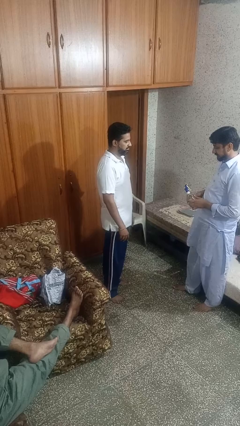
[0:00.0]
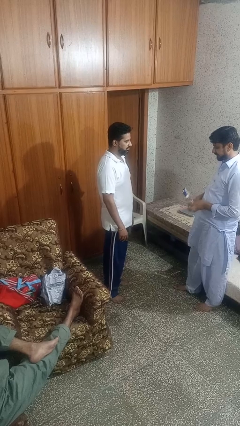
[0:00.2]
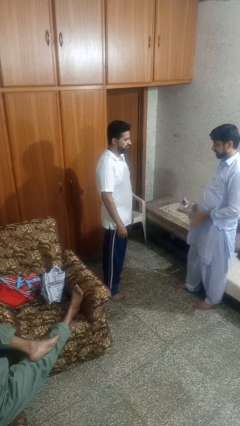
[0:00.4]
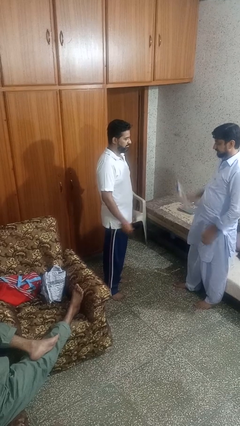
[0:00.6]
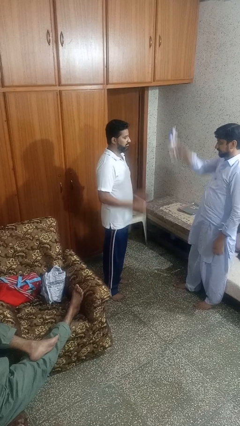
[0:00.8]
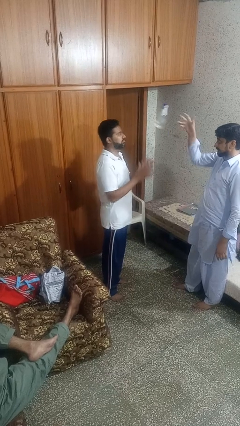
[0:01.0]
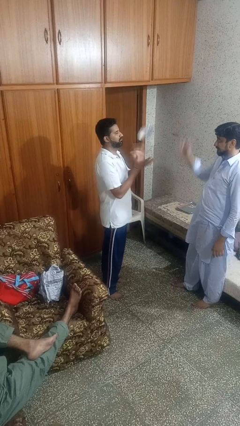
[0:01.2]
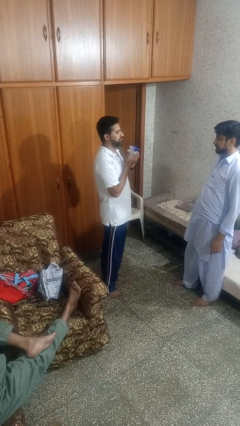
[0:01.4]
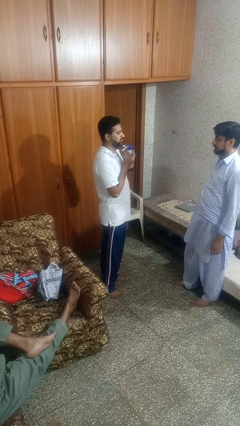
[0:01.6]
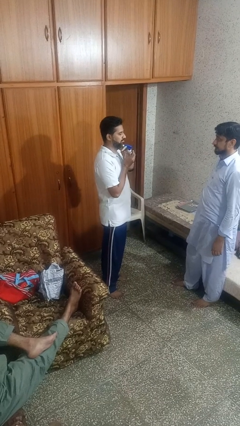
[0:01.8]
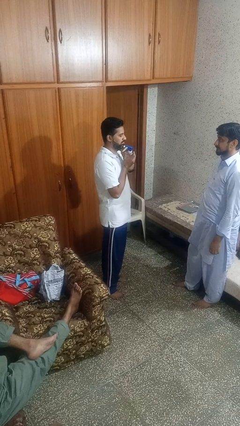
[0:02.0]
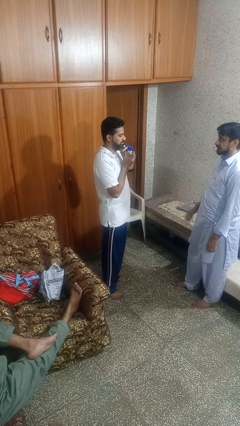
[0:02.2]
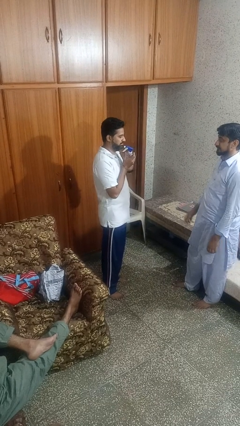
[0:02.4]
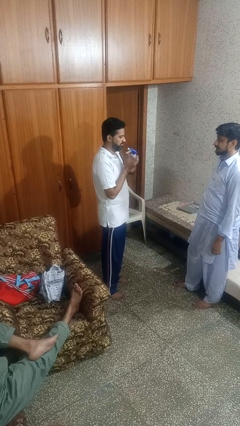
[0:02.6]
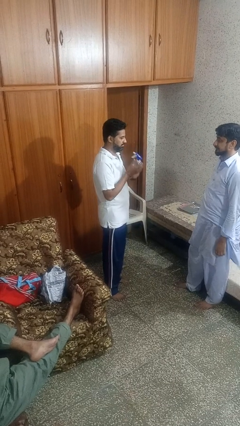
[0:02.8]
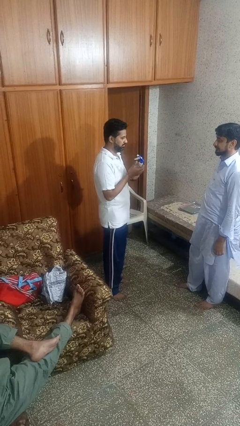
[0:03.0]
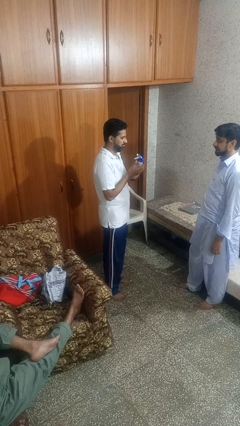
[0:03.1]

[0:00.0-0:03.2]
person catches object from person

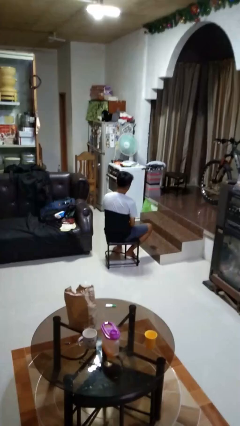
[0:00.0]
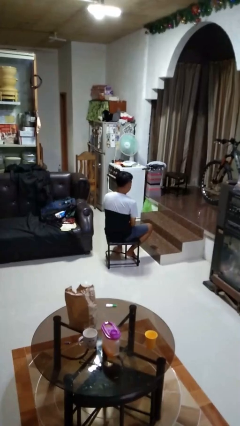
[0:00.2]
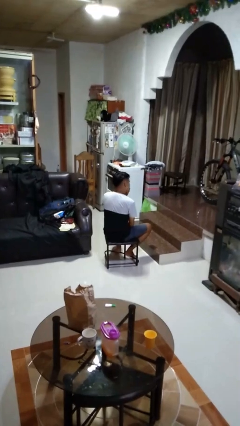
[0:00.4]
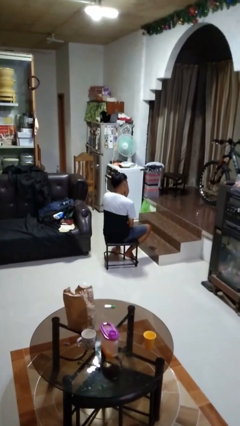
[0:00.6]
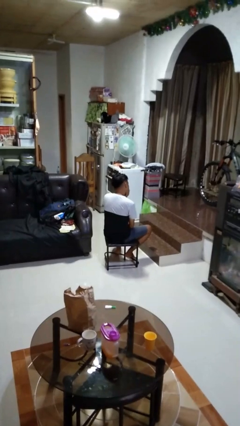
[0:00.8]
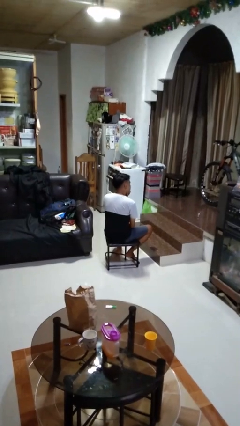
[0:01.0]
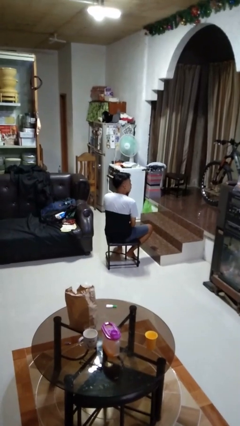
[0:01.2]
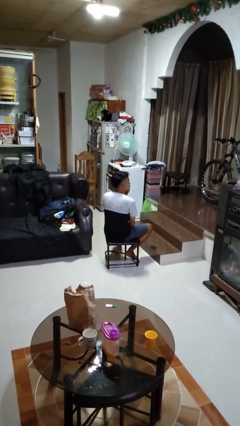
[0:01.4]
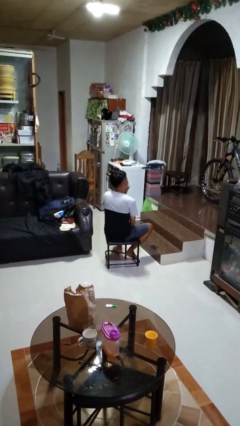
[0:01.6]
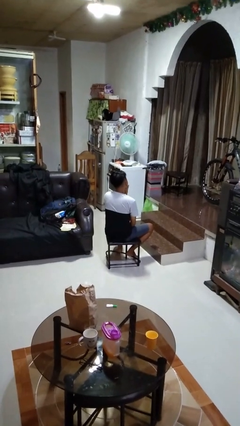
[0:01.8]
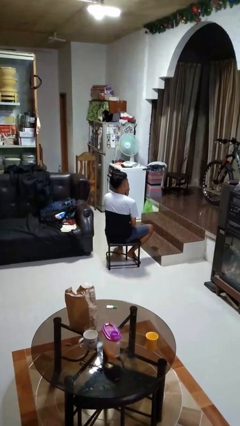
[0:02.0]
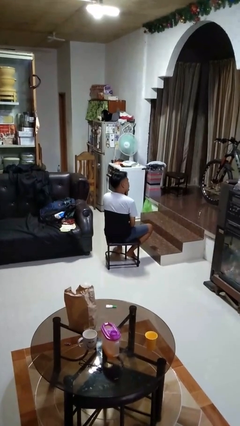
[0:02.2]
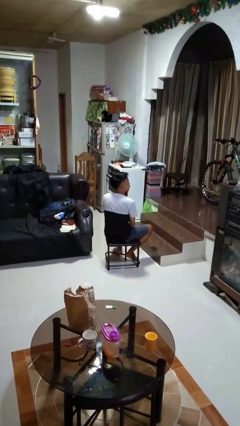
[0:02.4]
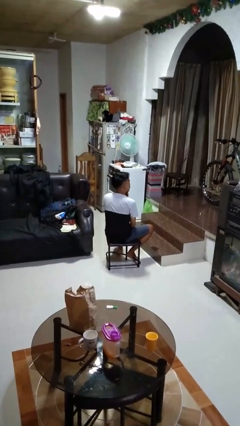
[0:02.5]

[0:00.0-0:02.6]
person strokes chin

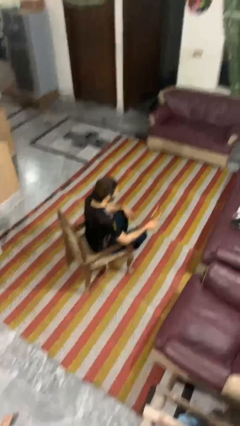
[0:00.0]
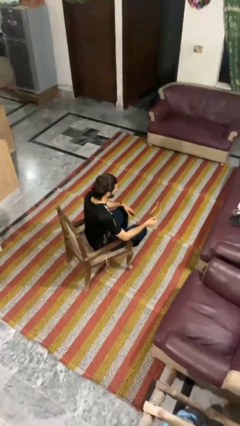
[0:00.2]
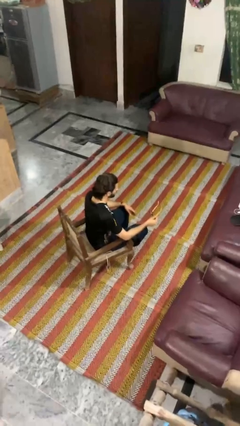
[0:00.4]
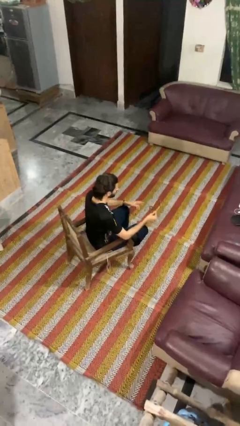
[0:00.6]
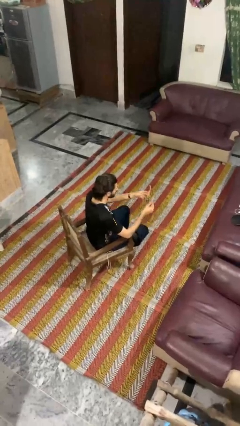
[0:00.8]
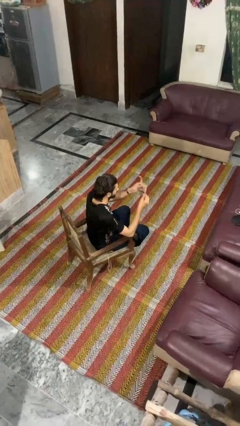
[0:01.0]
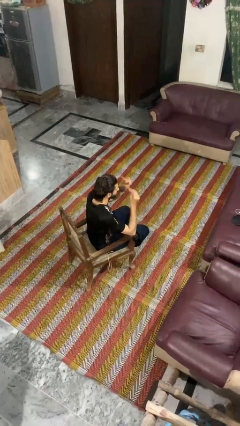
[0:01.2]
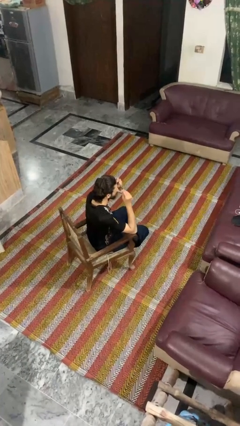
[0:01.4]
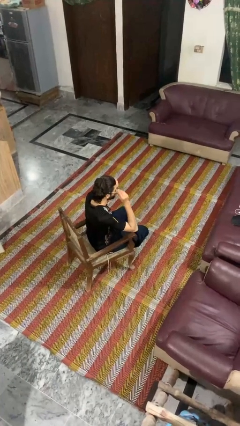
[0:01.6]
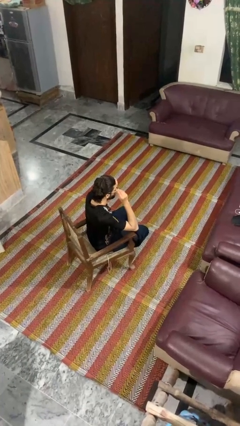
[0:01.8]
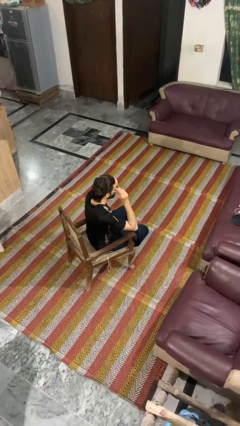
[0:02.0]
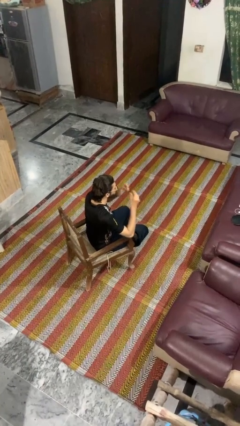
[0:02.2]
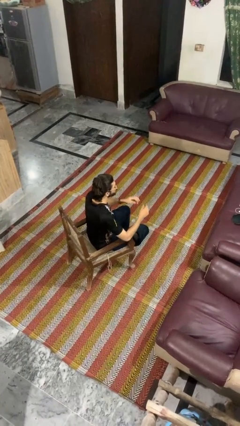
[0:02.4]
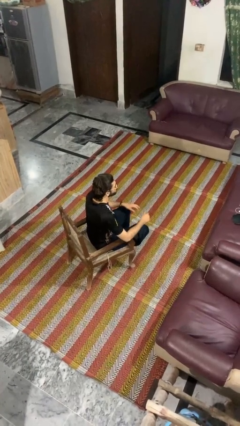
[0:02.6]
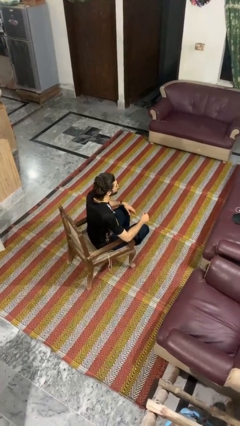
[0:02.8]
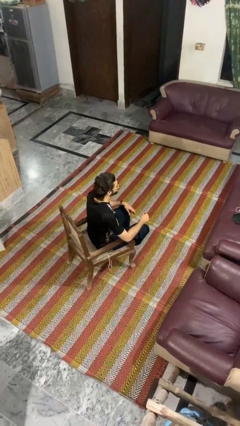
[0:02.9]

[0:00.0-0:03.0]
person puts on glasses

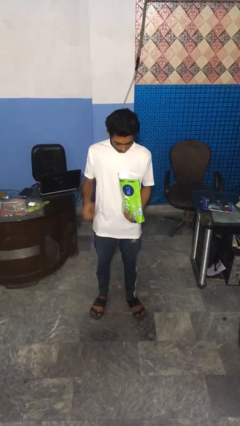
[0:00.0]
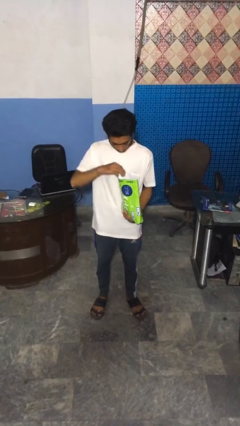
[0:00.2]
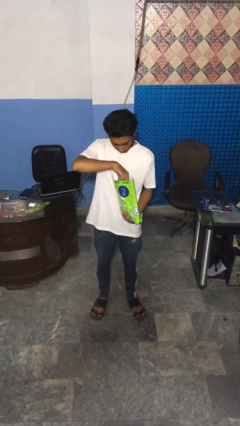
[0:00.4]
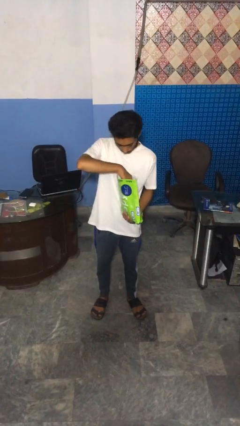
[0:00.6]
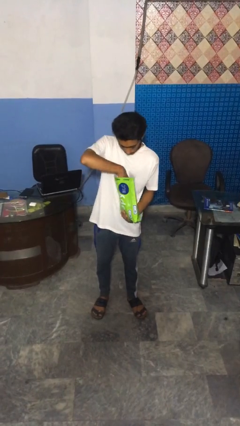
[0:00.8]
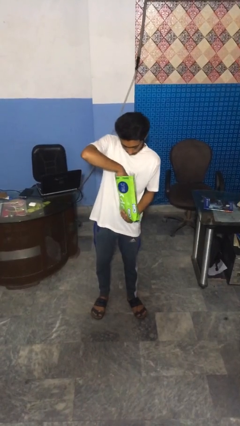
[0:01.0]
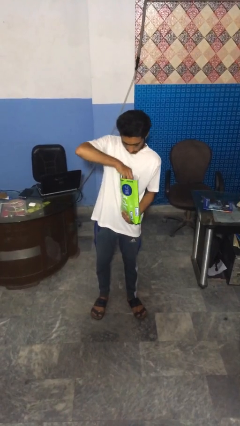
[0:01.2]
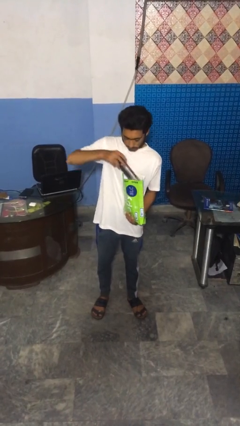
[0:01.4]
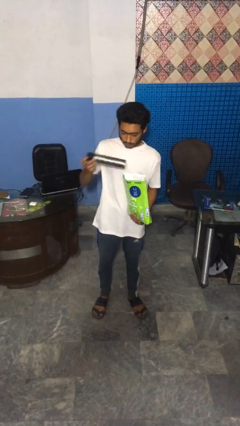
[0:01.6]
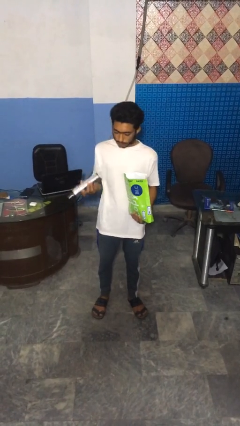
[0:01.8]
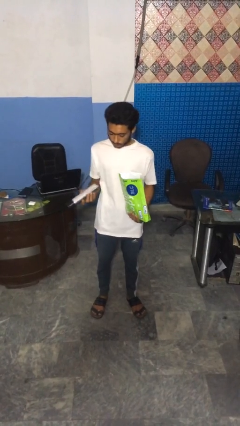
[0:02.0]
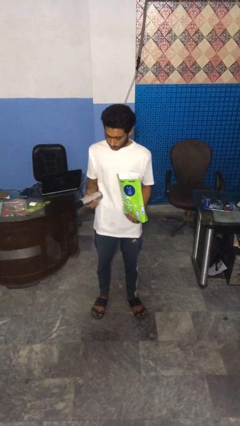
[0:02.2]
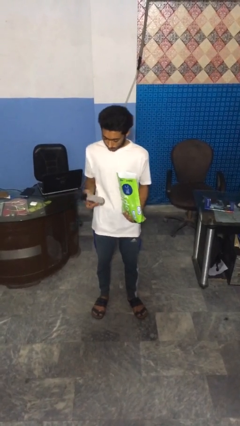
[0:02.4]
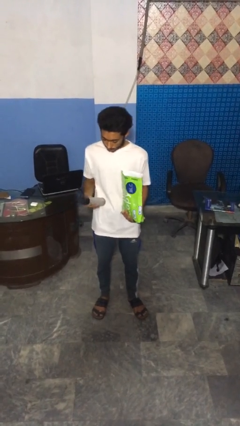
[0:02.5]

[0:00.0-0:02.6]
person takes object from bag

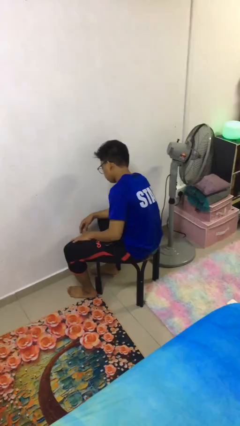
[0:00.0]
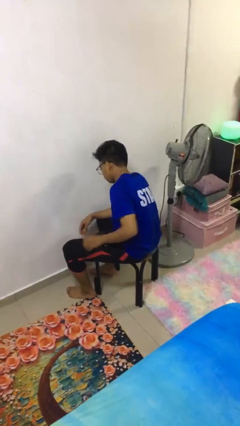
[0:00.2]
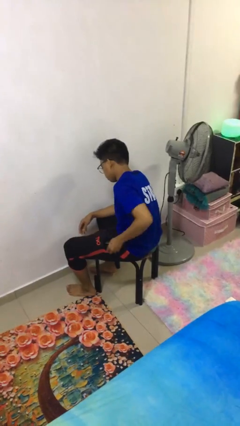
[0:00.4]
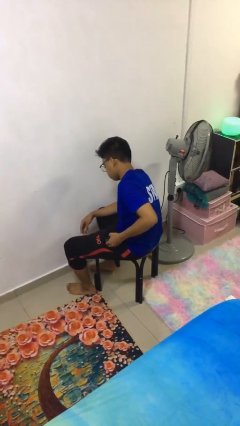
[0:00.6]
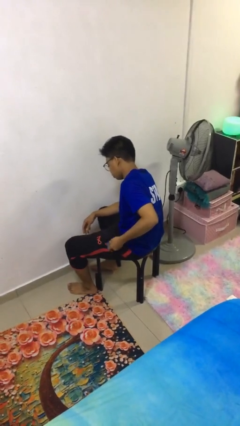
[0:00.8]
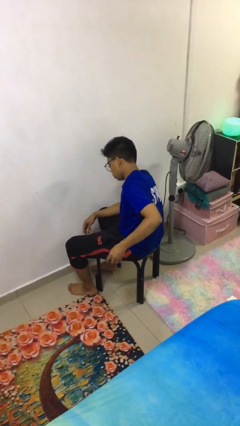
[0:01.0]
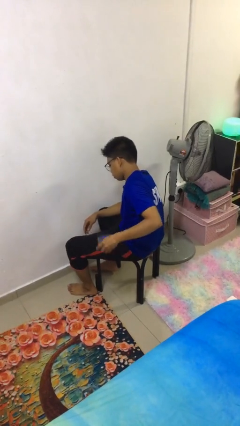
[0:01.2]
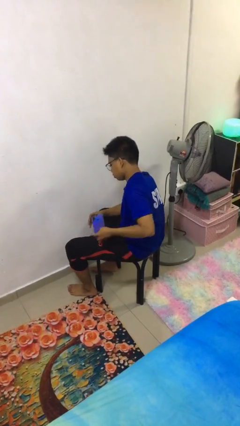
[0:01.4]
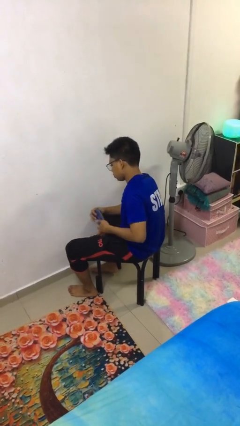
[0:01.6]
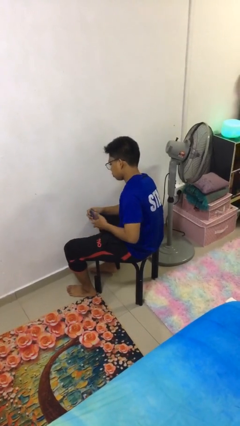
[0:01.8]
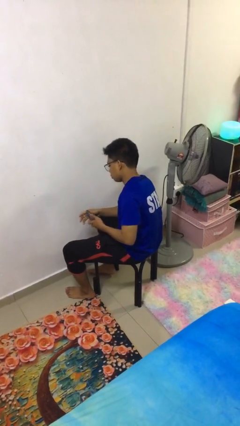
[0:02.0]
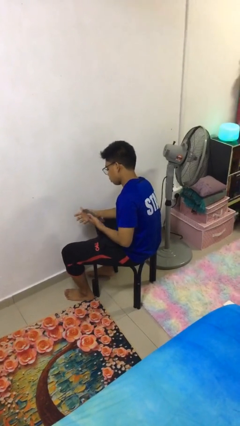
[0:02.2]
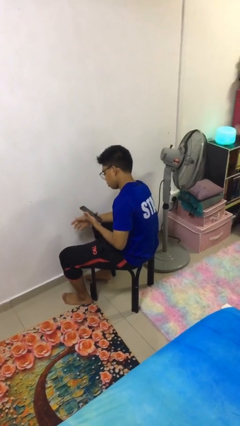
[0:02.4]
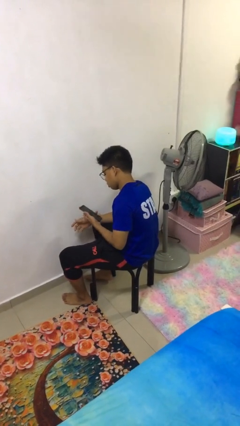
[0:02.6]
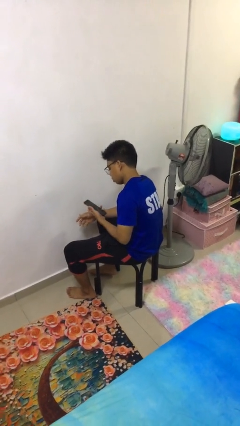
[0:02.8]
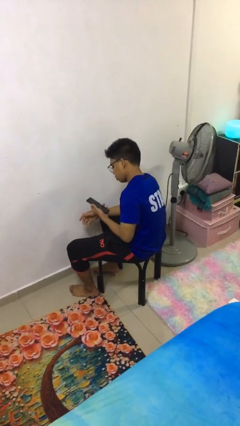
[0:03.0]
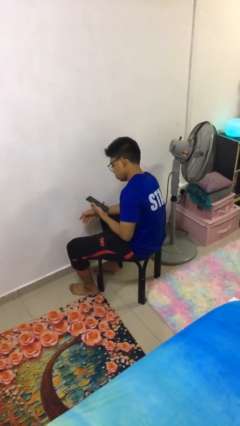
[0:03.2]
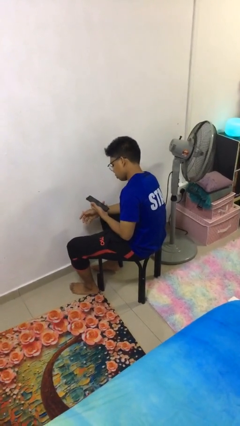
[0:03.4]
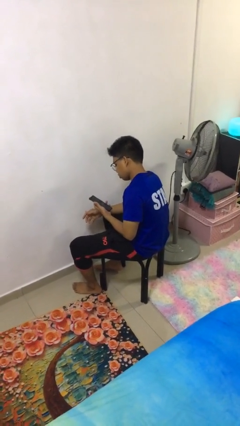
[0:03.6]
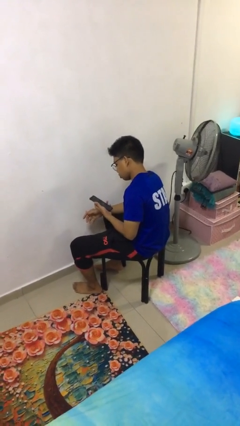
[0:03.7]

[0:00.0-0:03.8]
person takes phone from pocket

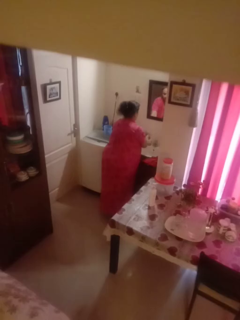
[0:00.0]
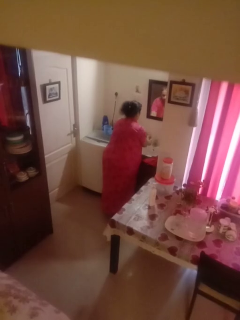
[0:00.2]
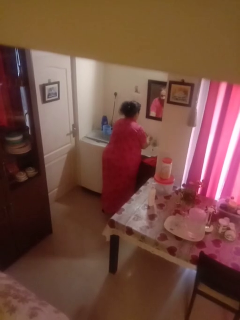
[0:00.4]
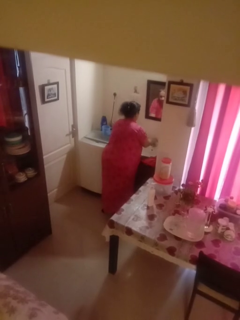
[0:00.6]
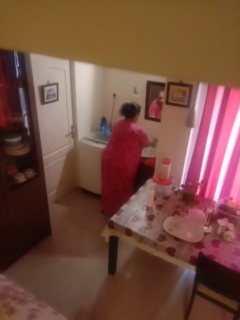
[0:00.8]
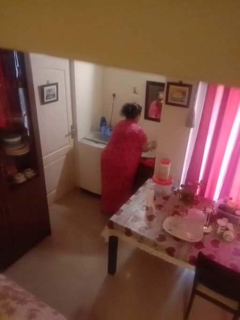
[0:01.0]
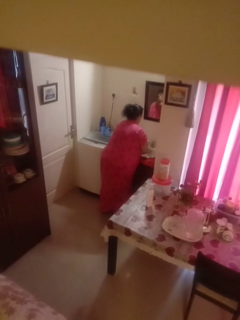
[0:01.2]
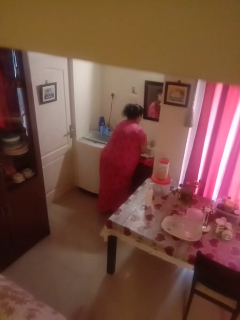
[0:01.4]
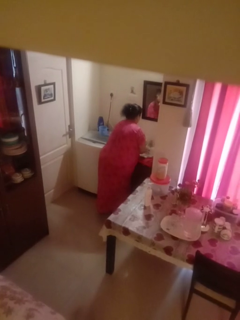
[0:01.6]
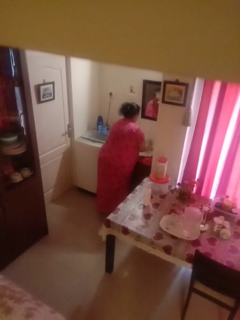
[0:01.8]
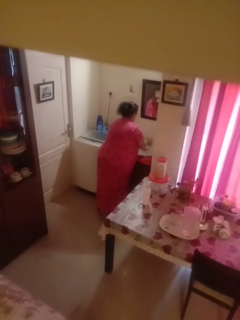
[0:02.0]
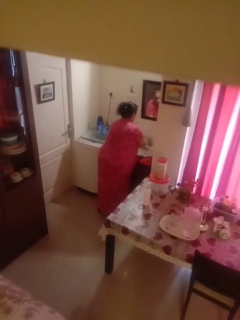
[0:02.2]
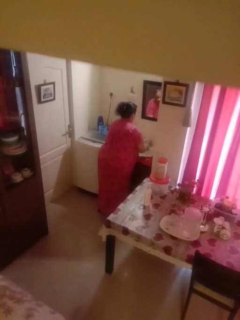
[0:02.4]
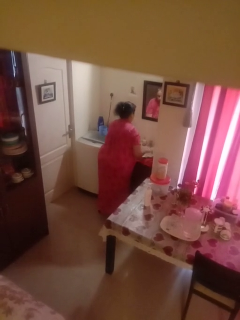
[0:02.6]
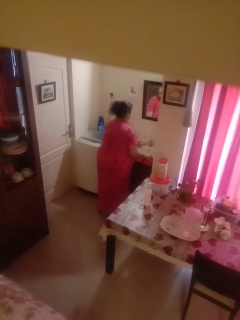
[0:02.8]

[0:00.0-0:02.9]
person washes hands
